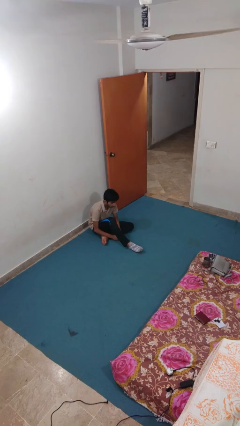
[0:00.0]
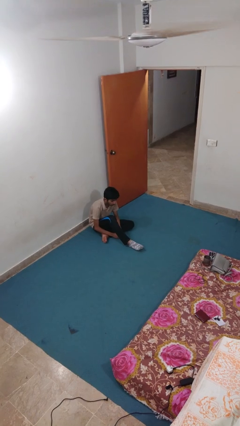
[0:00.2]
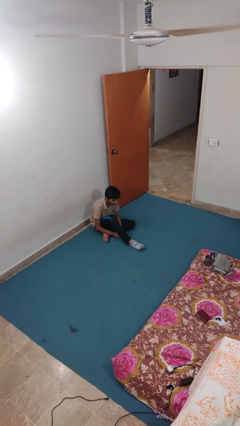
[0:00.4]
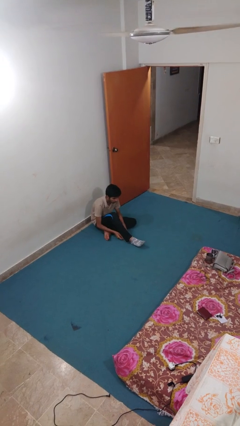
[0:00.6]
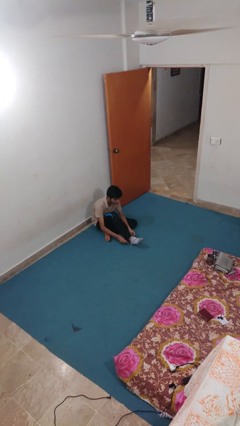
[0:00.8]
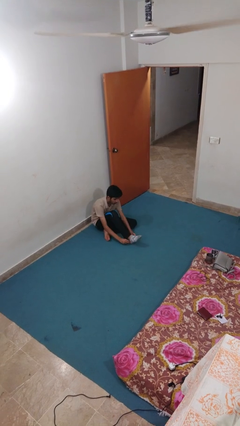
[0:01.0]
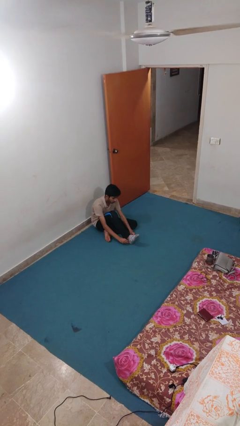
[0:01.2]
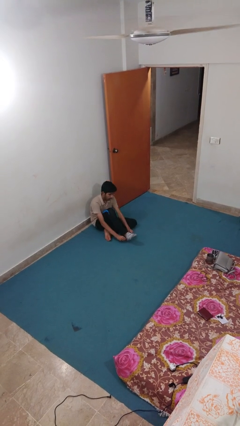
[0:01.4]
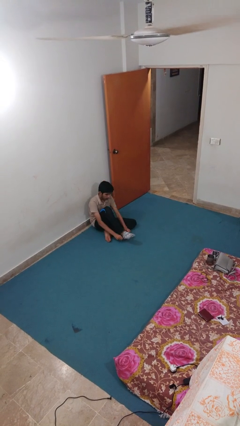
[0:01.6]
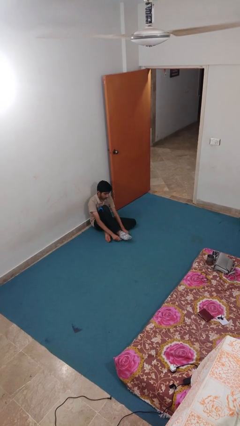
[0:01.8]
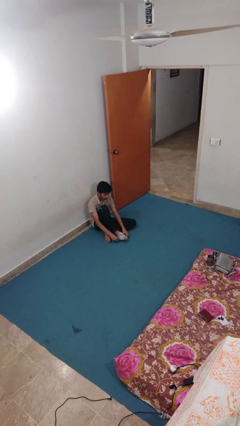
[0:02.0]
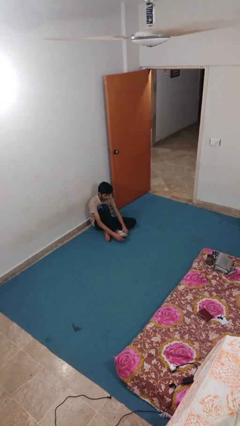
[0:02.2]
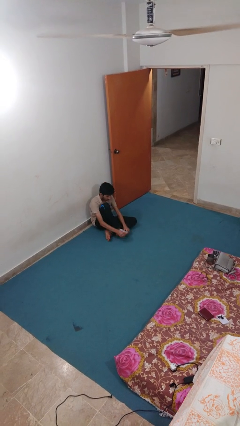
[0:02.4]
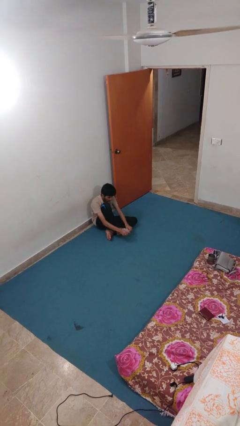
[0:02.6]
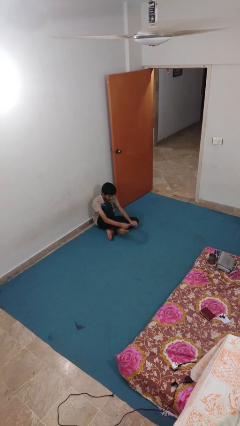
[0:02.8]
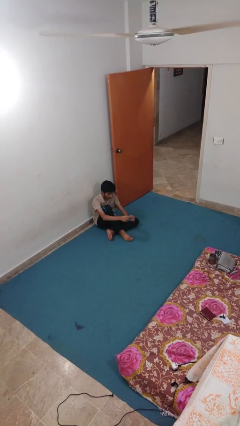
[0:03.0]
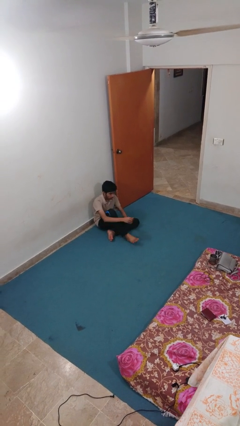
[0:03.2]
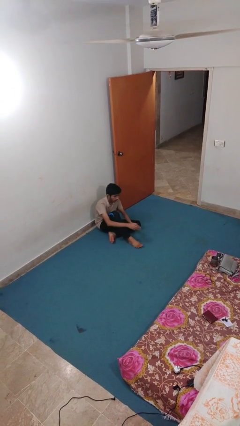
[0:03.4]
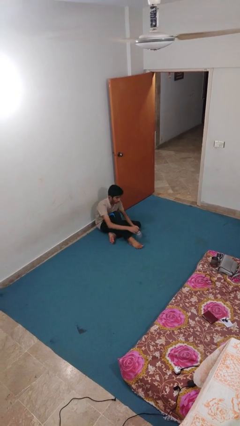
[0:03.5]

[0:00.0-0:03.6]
person takes off socks

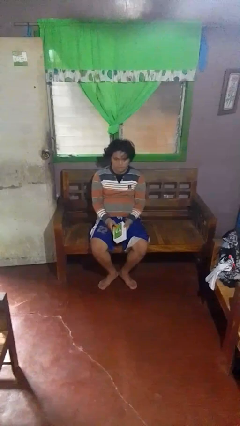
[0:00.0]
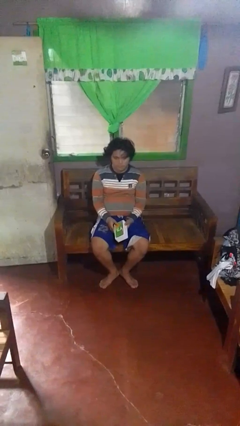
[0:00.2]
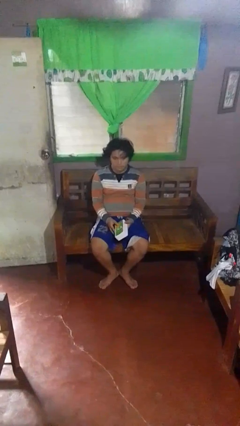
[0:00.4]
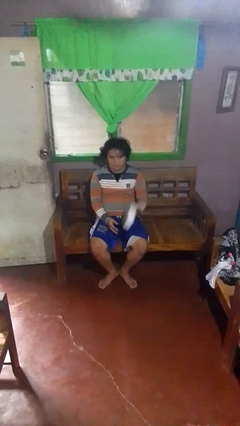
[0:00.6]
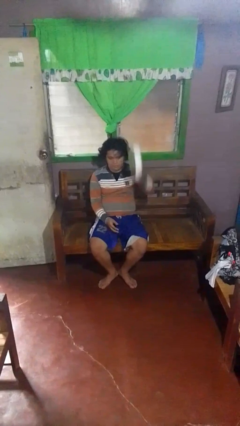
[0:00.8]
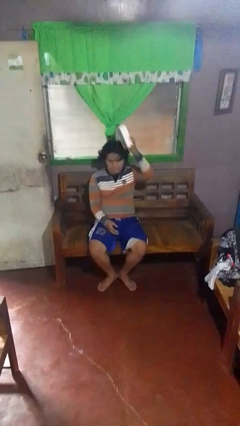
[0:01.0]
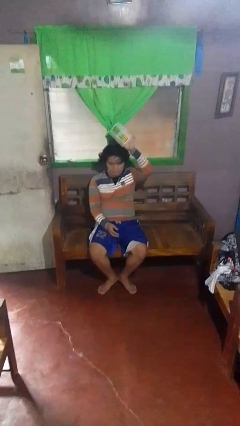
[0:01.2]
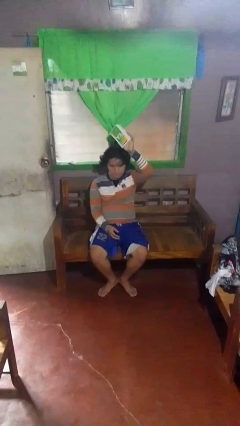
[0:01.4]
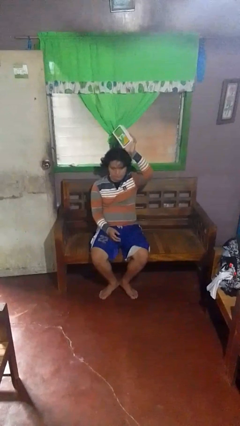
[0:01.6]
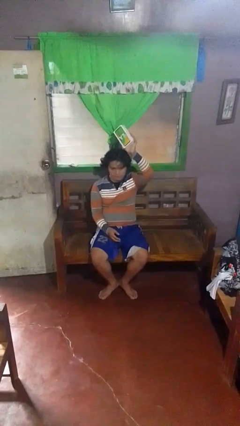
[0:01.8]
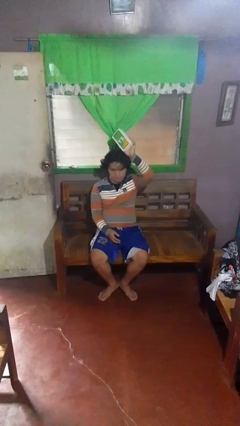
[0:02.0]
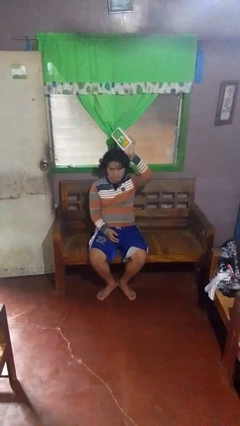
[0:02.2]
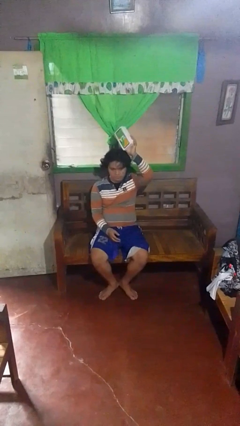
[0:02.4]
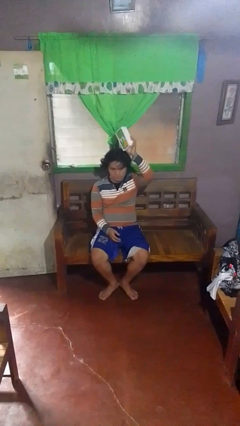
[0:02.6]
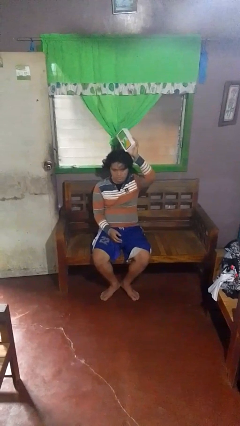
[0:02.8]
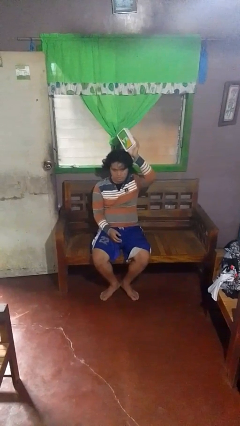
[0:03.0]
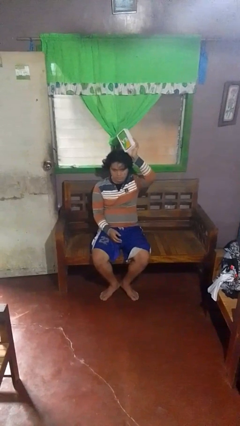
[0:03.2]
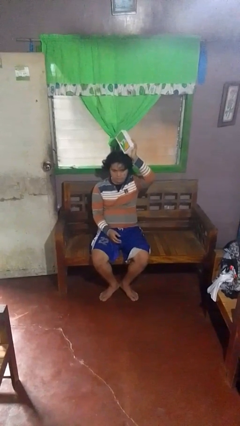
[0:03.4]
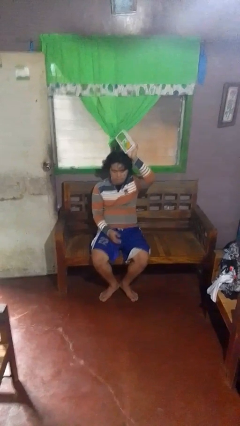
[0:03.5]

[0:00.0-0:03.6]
person holds object above head

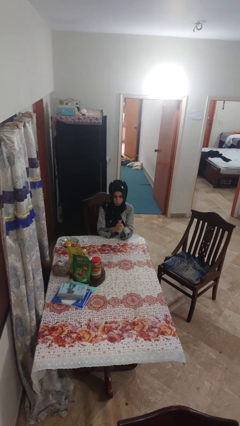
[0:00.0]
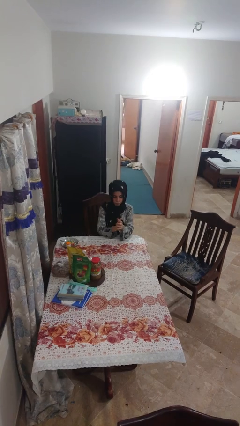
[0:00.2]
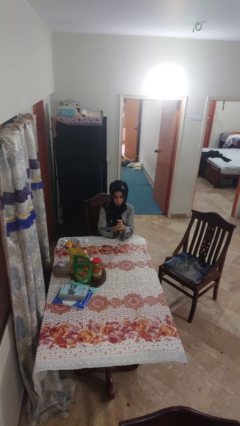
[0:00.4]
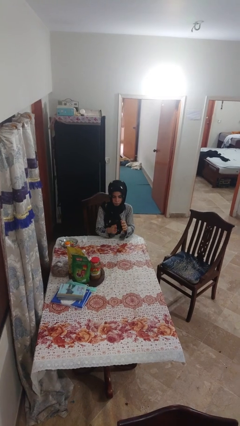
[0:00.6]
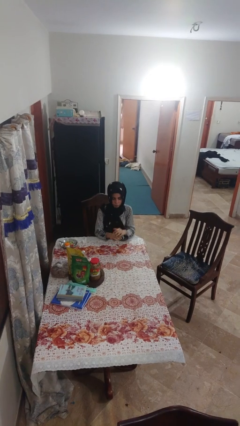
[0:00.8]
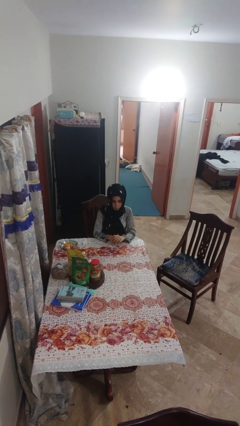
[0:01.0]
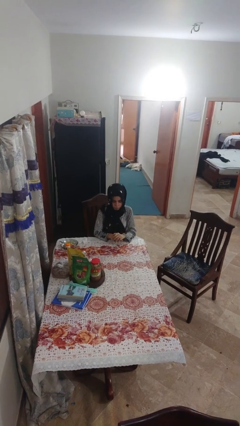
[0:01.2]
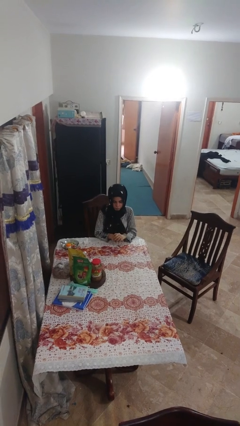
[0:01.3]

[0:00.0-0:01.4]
person claps hands

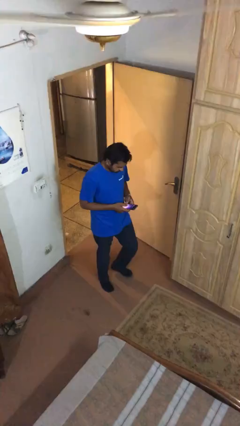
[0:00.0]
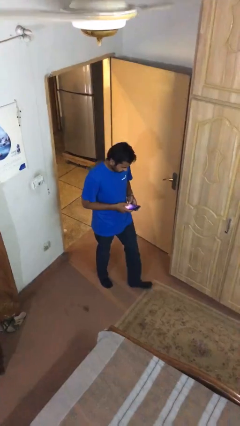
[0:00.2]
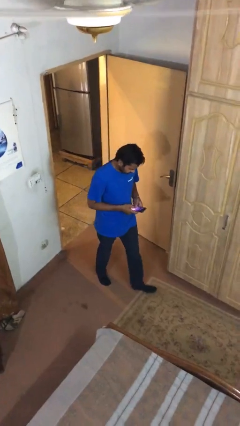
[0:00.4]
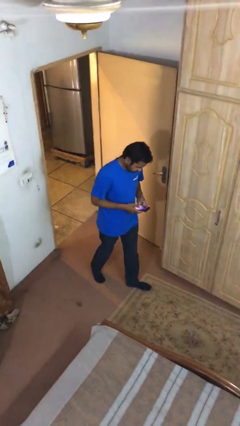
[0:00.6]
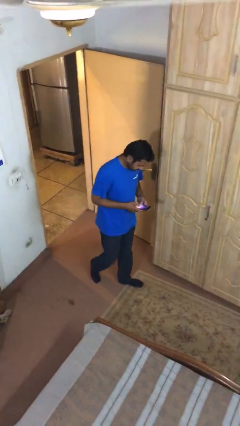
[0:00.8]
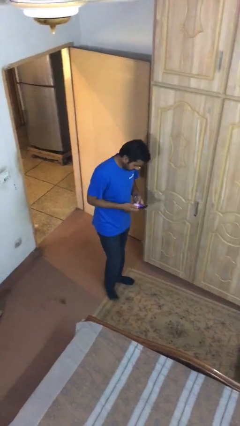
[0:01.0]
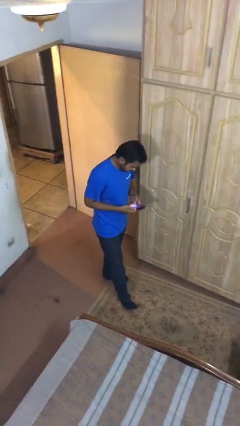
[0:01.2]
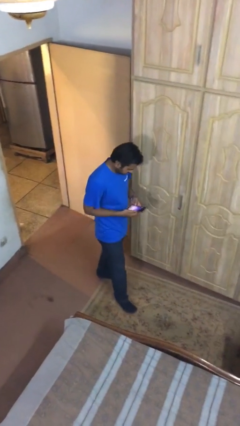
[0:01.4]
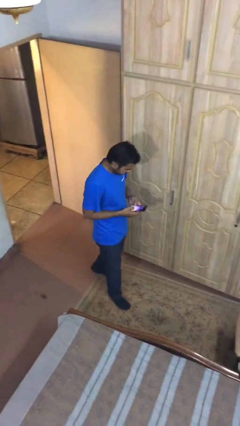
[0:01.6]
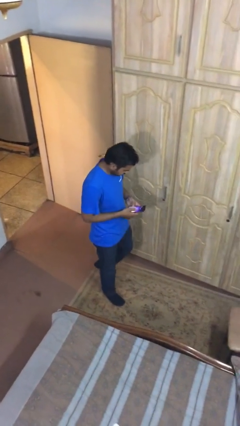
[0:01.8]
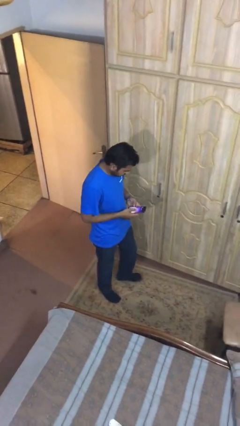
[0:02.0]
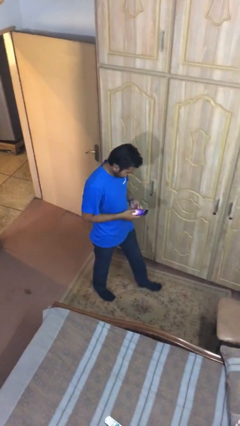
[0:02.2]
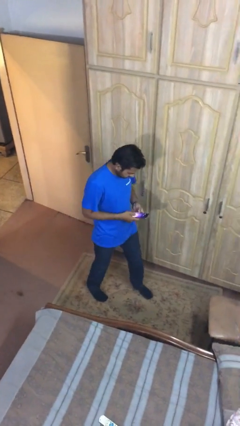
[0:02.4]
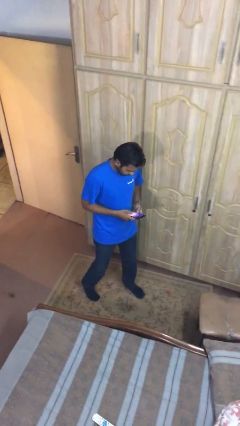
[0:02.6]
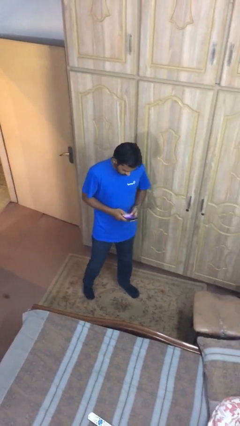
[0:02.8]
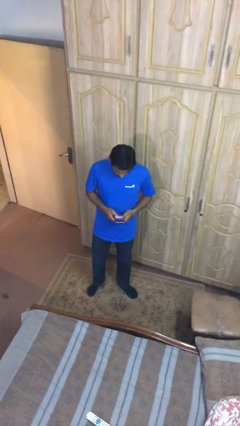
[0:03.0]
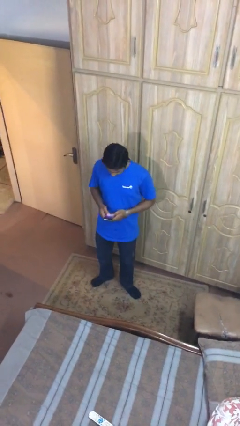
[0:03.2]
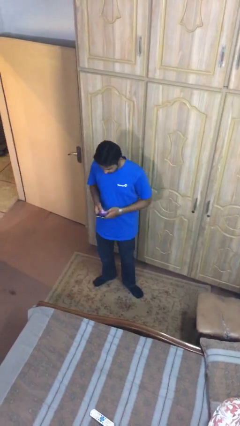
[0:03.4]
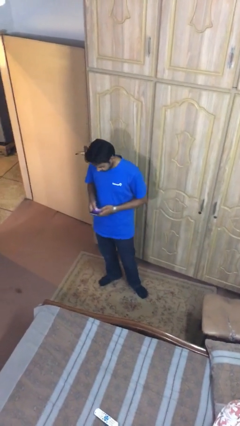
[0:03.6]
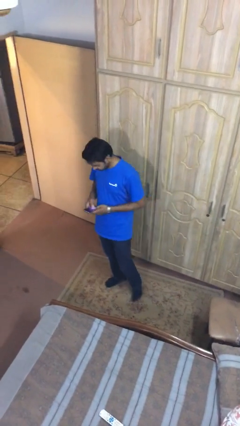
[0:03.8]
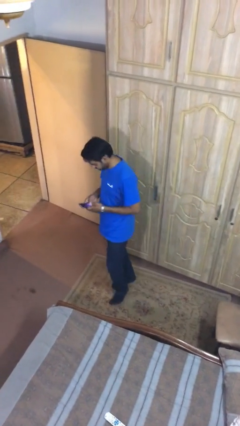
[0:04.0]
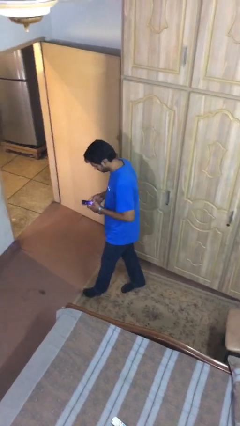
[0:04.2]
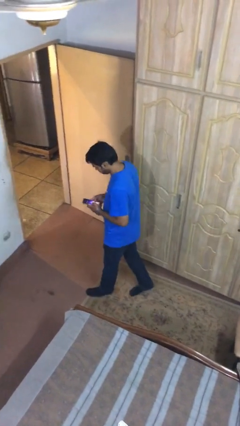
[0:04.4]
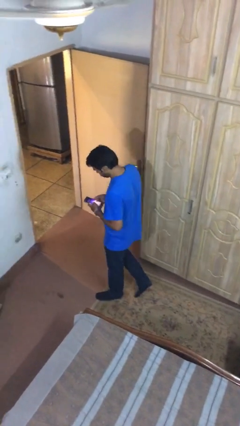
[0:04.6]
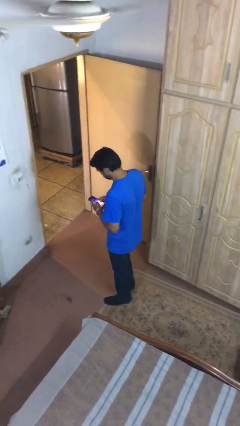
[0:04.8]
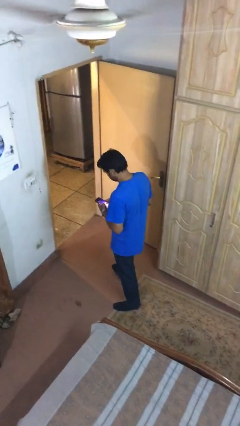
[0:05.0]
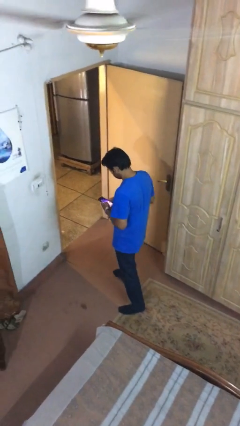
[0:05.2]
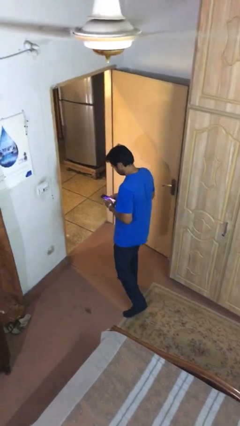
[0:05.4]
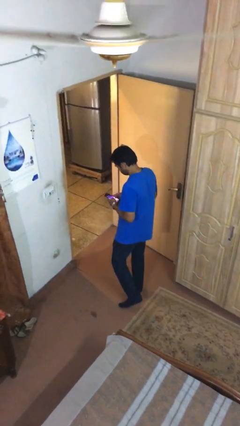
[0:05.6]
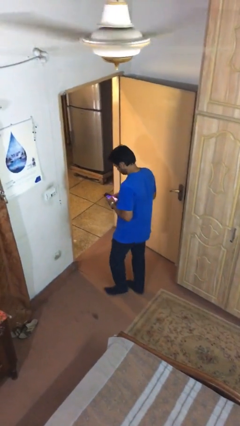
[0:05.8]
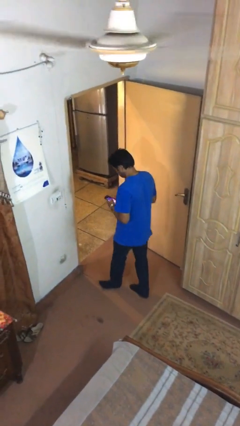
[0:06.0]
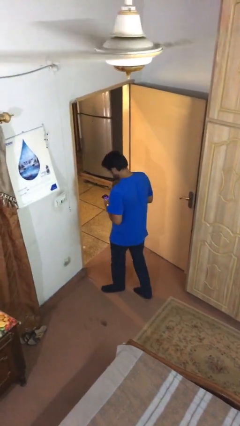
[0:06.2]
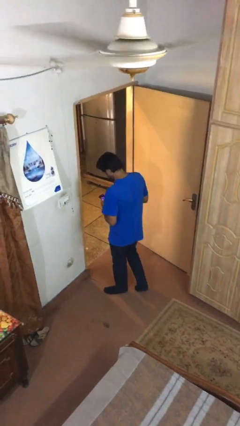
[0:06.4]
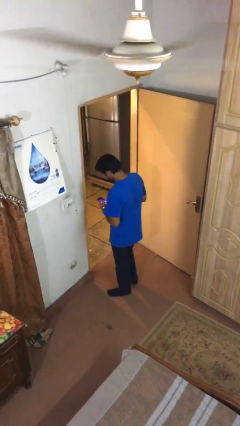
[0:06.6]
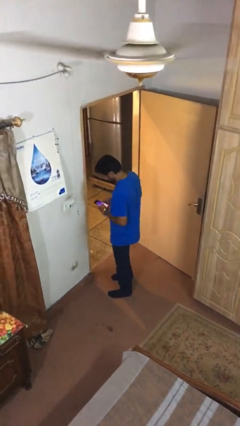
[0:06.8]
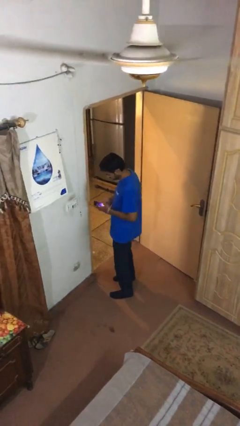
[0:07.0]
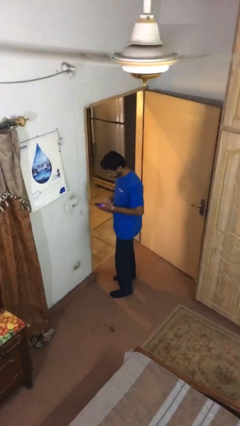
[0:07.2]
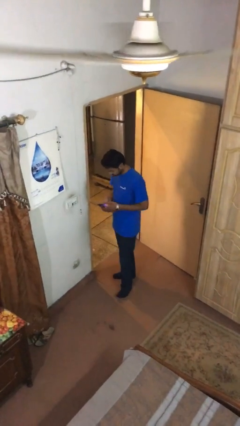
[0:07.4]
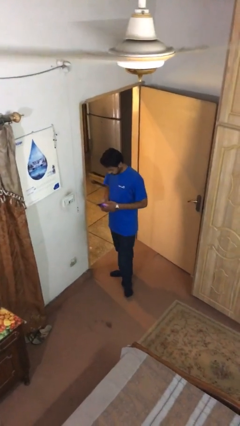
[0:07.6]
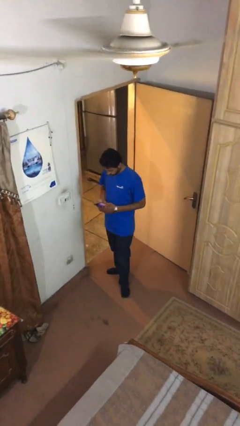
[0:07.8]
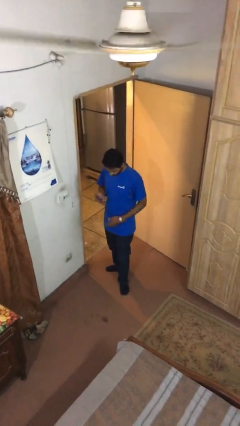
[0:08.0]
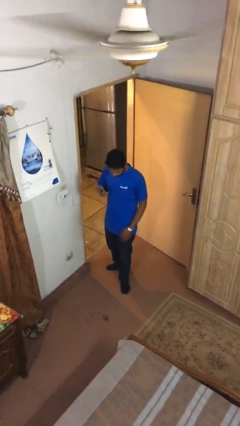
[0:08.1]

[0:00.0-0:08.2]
person texts on phone

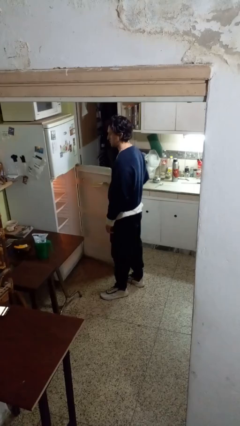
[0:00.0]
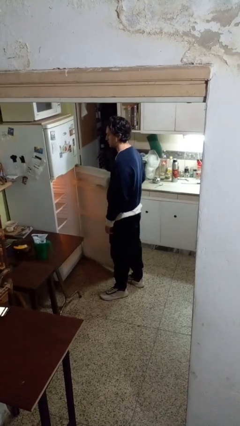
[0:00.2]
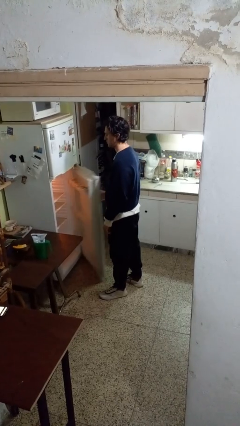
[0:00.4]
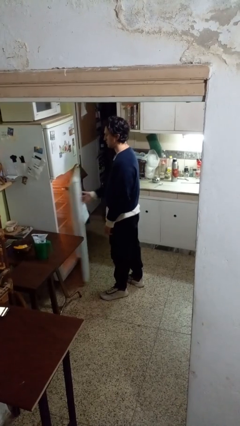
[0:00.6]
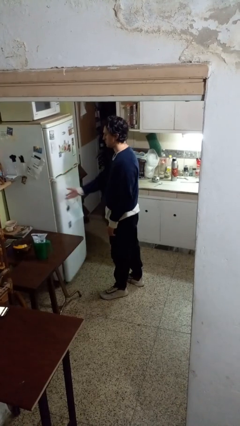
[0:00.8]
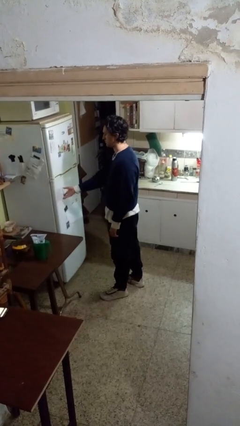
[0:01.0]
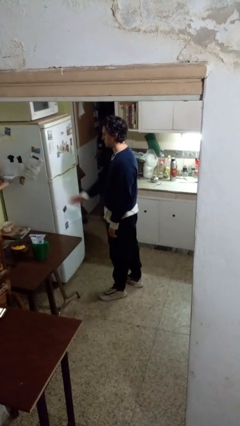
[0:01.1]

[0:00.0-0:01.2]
person closes refrigerator
